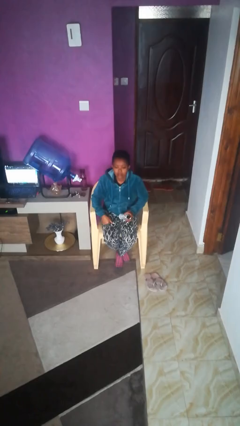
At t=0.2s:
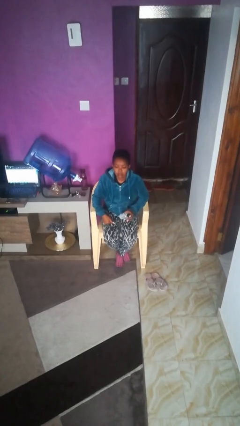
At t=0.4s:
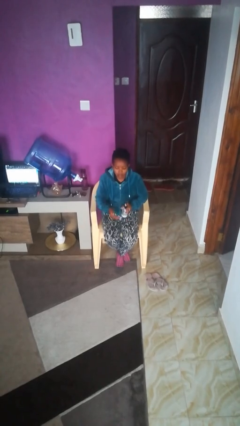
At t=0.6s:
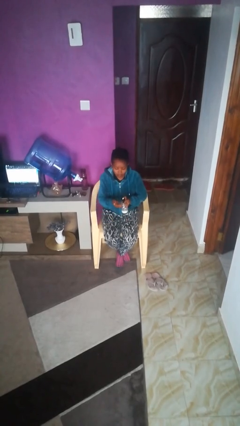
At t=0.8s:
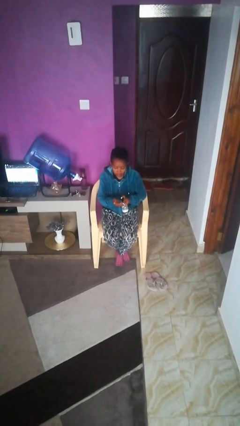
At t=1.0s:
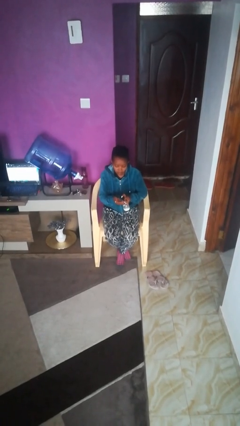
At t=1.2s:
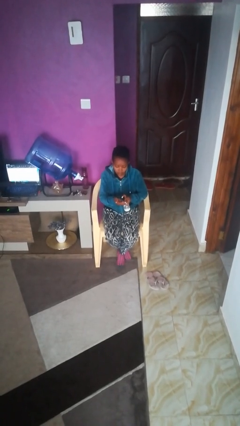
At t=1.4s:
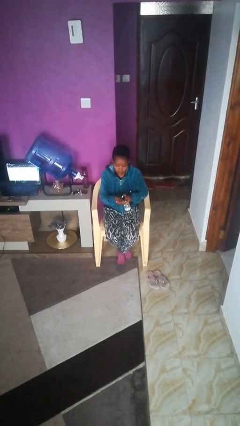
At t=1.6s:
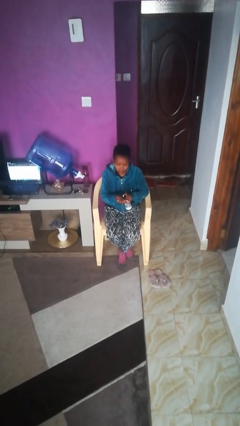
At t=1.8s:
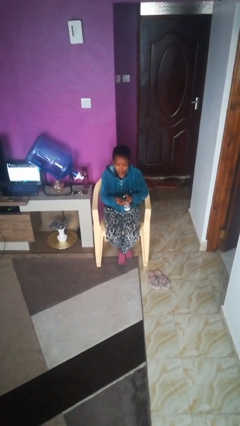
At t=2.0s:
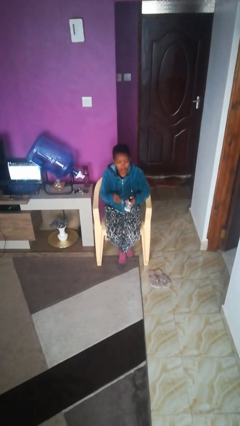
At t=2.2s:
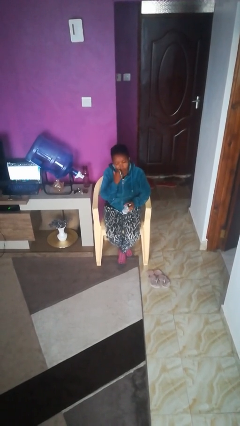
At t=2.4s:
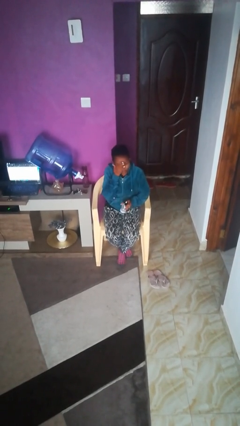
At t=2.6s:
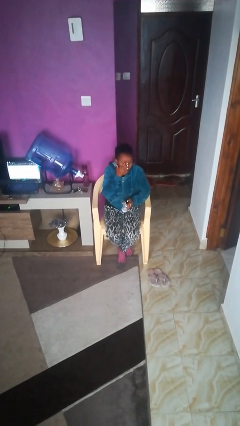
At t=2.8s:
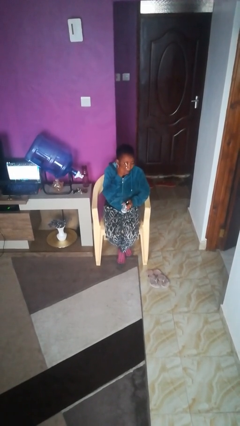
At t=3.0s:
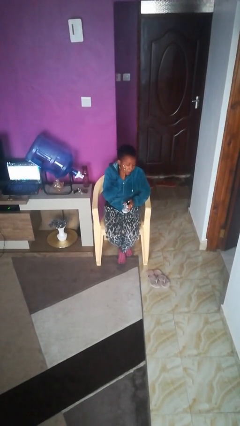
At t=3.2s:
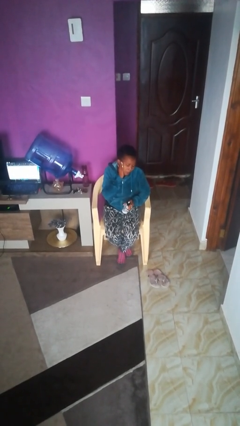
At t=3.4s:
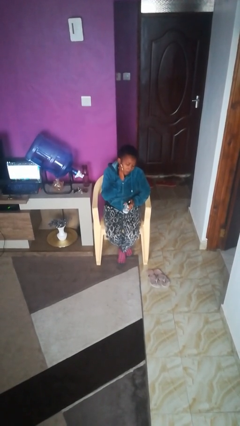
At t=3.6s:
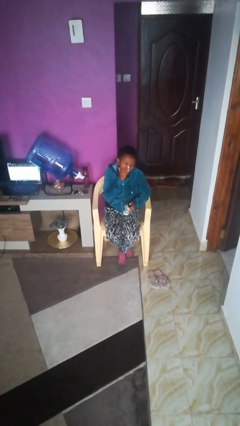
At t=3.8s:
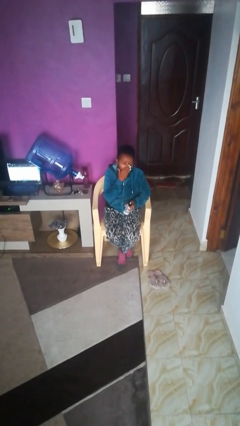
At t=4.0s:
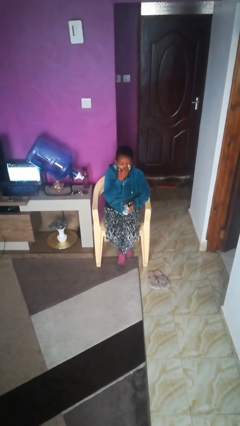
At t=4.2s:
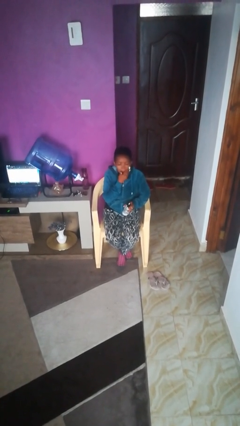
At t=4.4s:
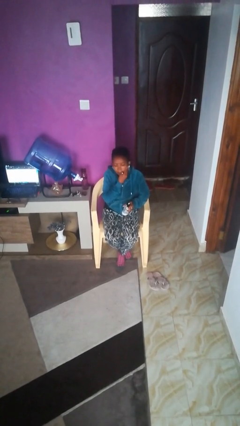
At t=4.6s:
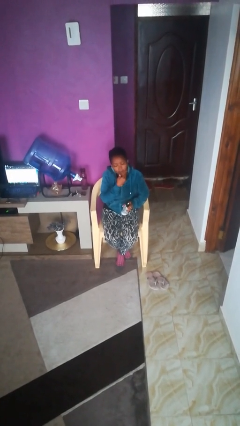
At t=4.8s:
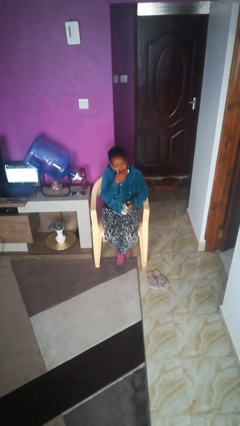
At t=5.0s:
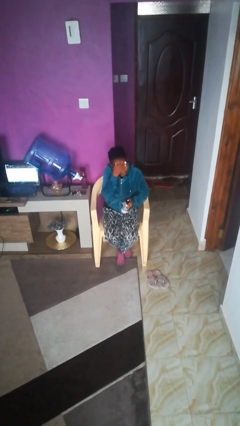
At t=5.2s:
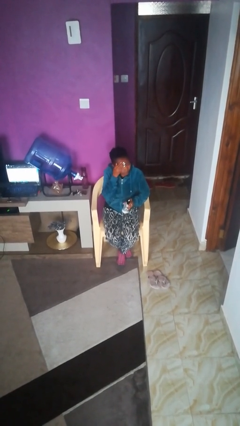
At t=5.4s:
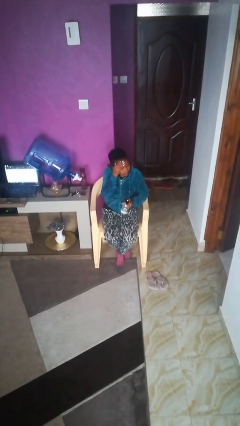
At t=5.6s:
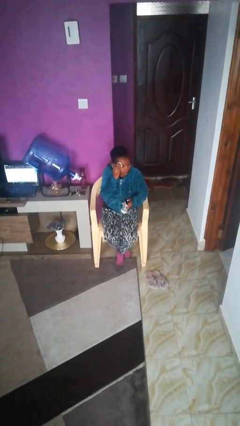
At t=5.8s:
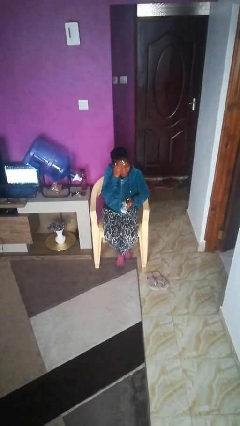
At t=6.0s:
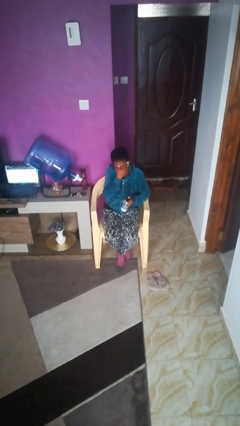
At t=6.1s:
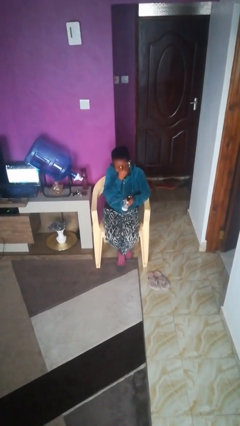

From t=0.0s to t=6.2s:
person applies facial moisturizer

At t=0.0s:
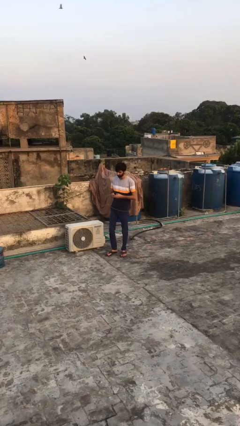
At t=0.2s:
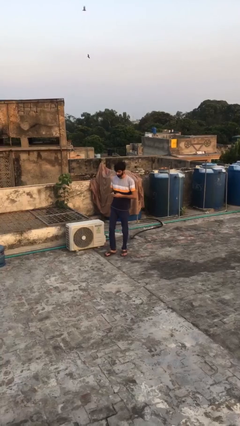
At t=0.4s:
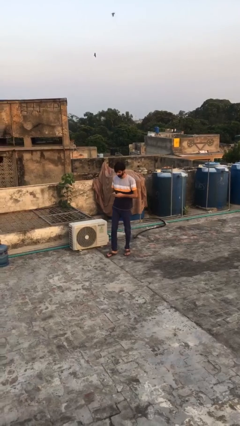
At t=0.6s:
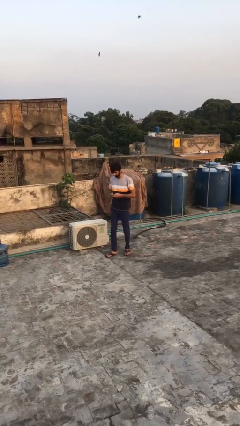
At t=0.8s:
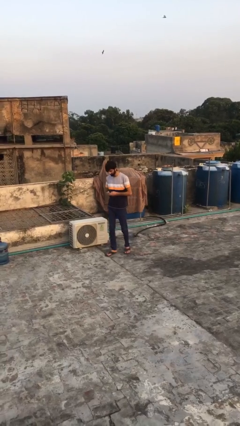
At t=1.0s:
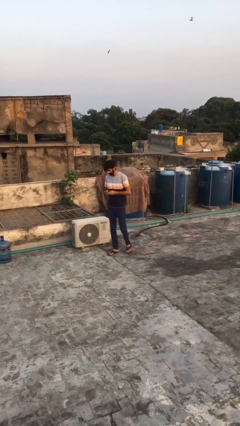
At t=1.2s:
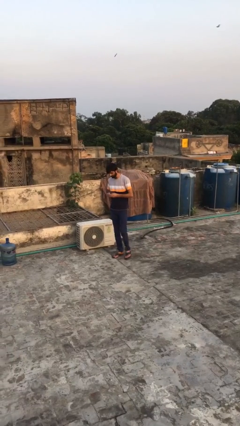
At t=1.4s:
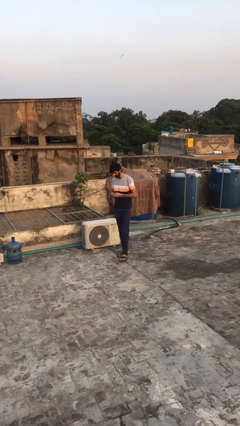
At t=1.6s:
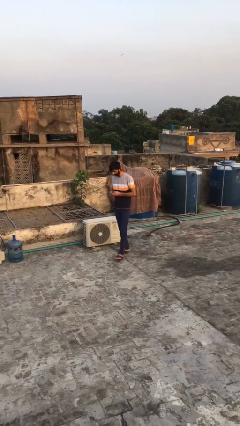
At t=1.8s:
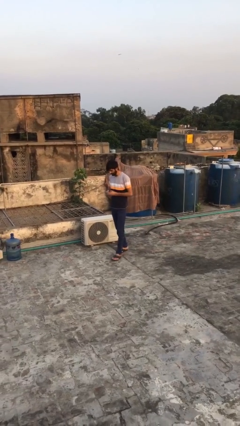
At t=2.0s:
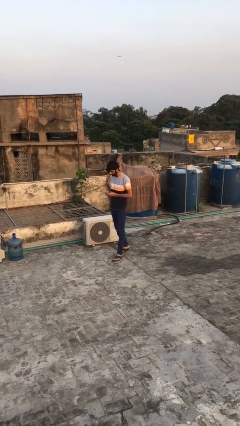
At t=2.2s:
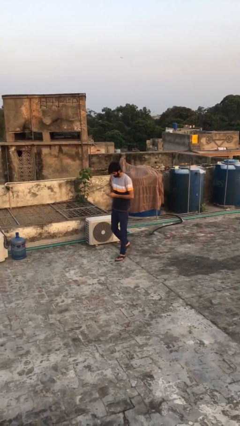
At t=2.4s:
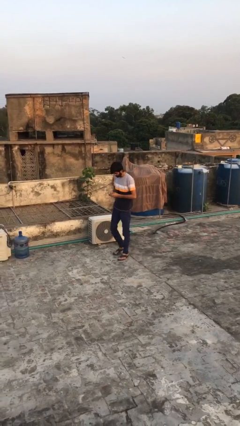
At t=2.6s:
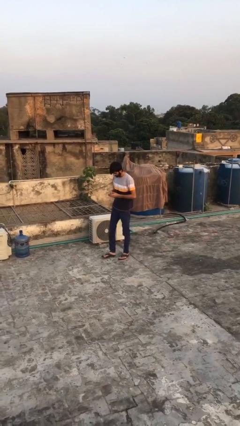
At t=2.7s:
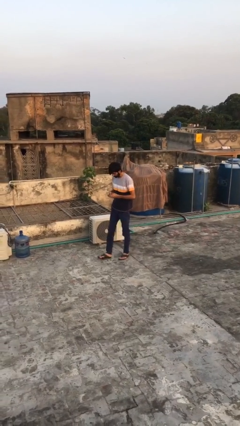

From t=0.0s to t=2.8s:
person texts on phone

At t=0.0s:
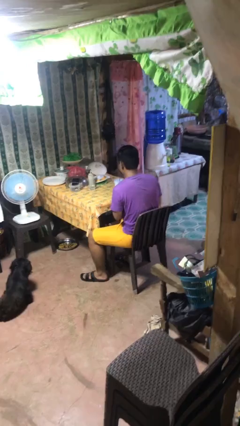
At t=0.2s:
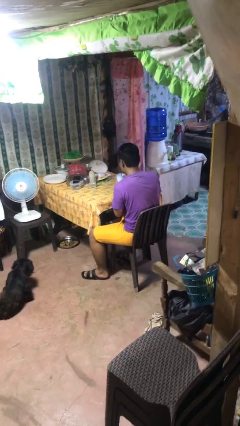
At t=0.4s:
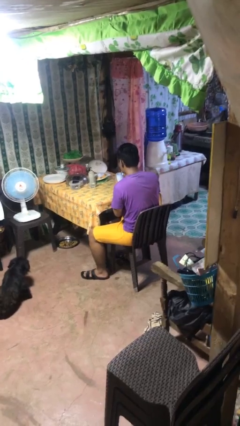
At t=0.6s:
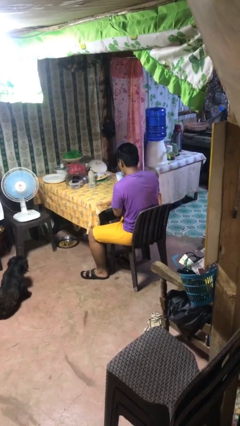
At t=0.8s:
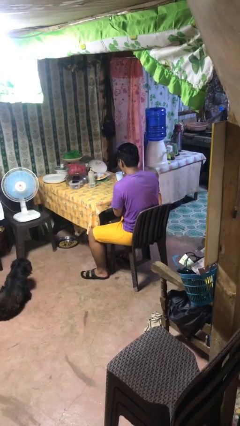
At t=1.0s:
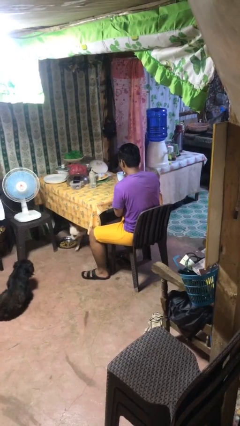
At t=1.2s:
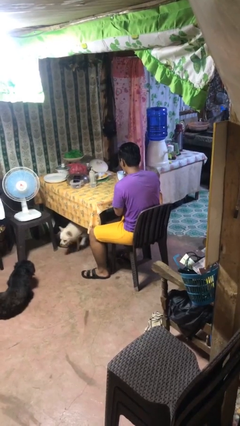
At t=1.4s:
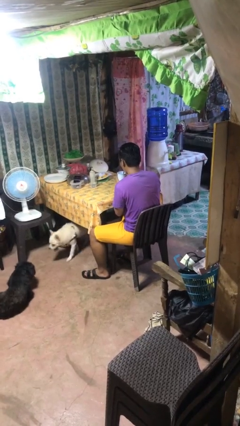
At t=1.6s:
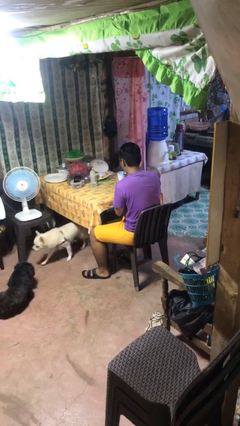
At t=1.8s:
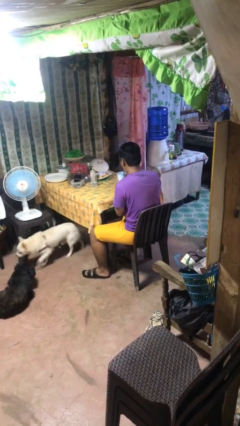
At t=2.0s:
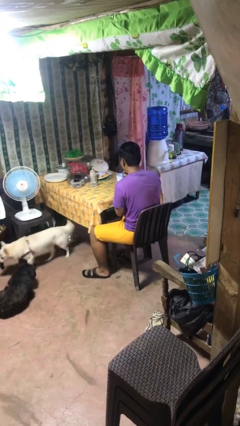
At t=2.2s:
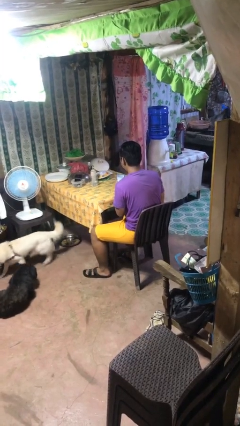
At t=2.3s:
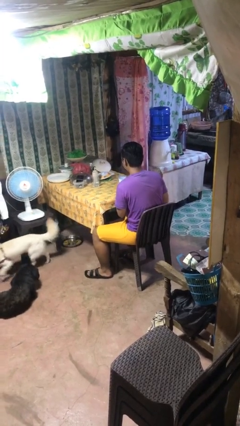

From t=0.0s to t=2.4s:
person drinks from straw

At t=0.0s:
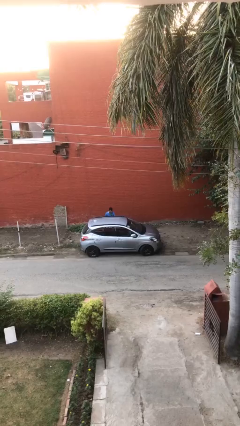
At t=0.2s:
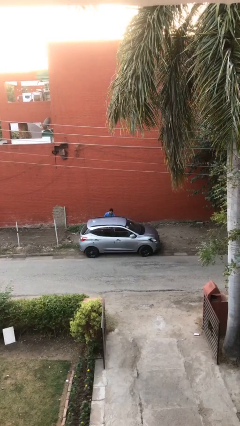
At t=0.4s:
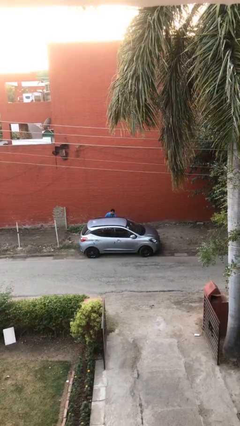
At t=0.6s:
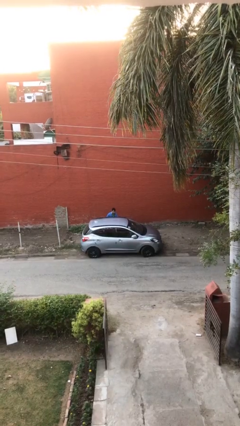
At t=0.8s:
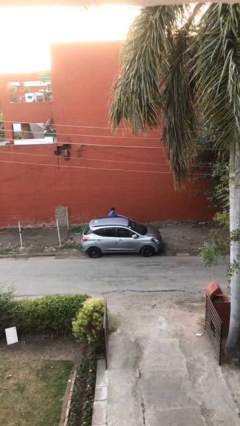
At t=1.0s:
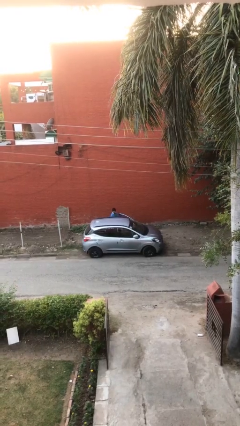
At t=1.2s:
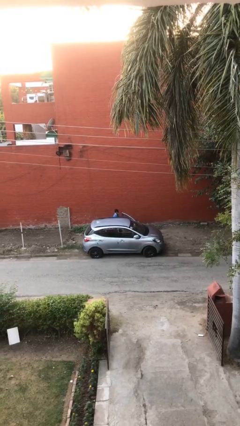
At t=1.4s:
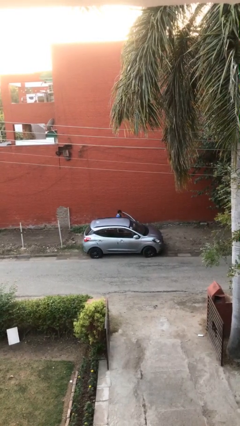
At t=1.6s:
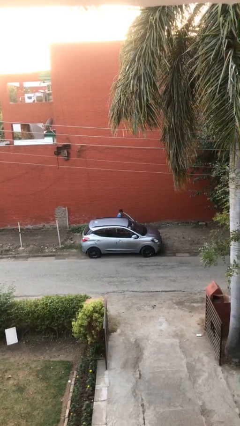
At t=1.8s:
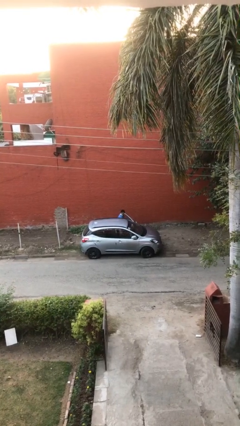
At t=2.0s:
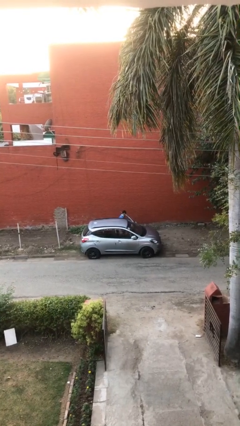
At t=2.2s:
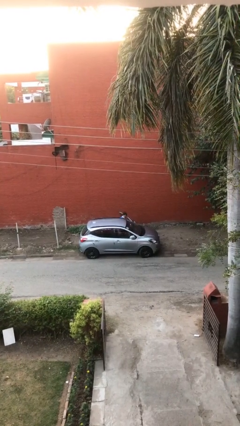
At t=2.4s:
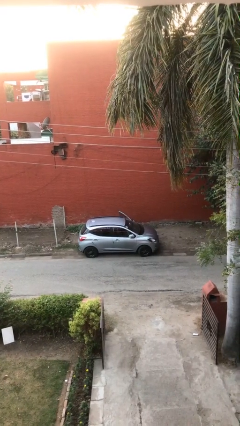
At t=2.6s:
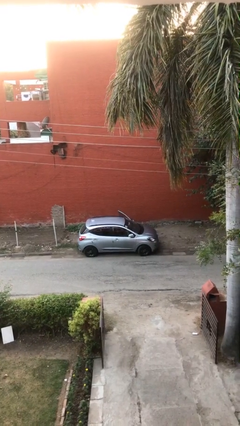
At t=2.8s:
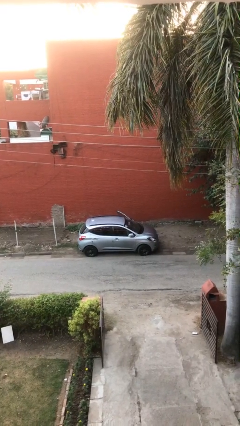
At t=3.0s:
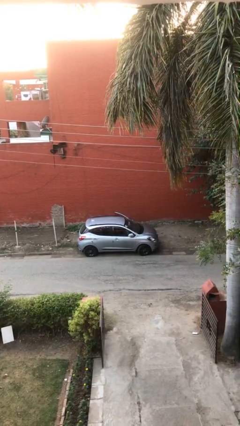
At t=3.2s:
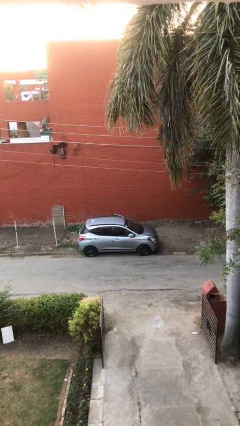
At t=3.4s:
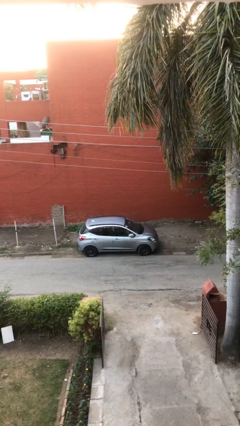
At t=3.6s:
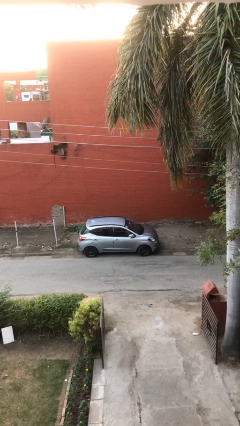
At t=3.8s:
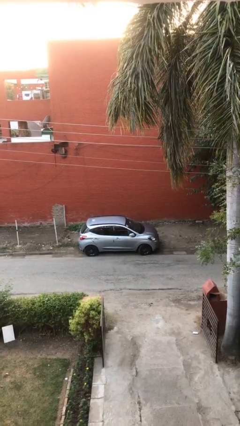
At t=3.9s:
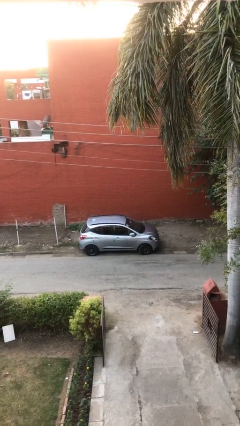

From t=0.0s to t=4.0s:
person enters car

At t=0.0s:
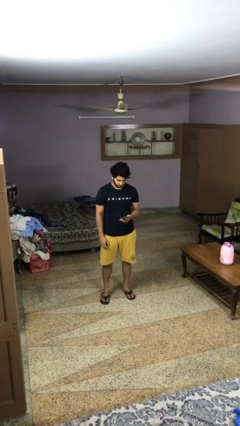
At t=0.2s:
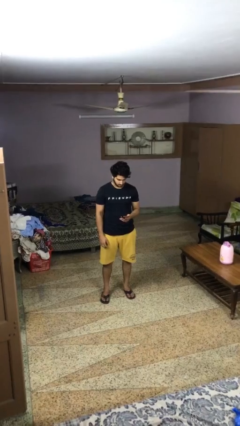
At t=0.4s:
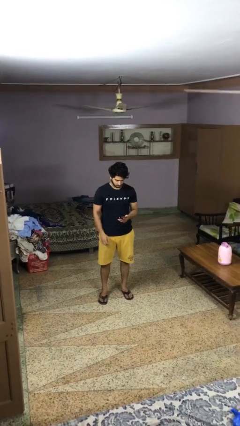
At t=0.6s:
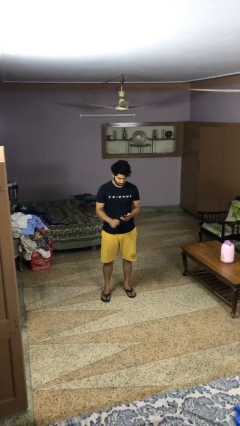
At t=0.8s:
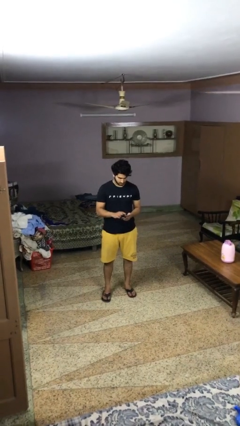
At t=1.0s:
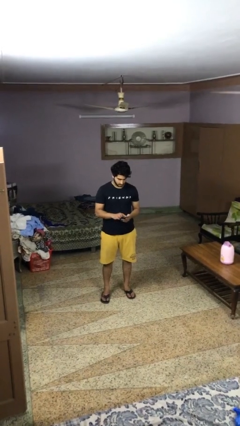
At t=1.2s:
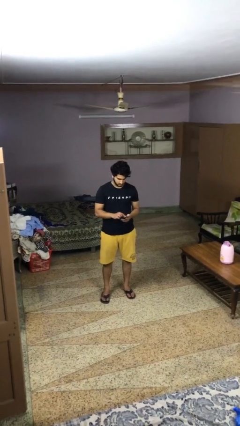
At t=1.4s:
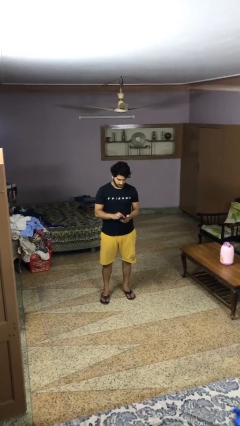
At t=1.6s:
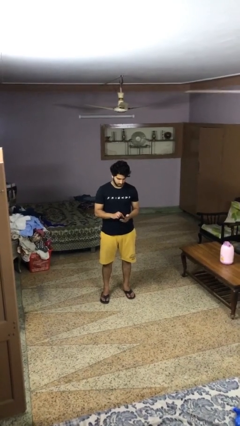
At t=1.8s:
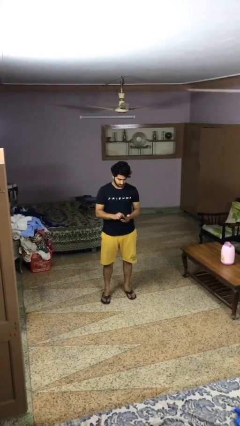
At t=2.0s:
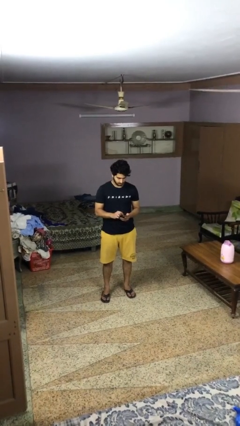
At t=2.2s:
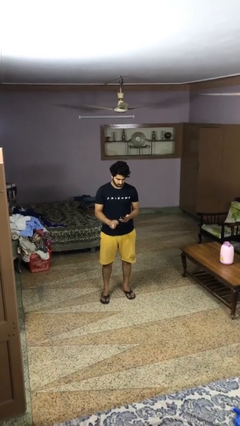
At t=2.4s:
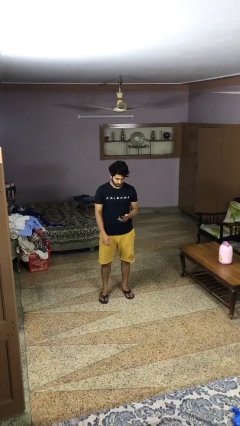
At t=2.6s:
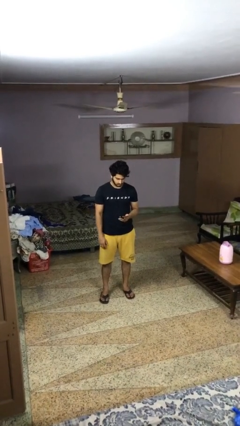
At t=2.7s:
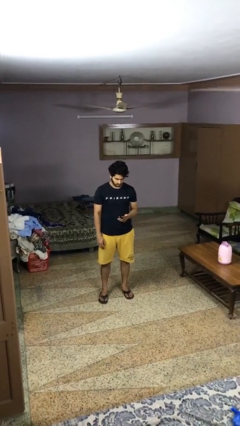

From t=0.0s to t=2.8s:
person gestures zoom out
